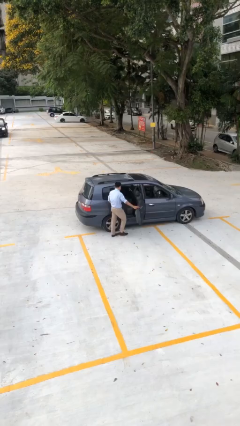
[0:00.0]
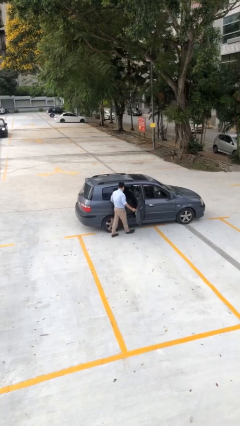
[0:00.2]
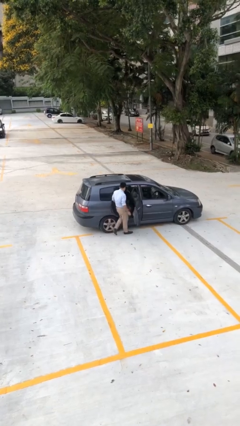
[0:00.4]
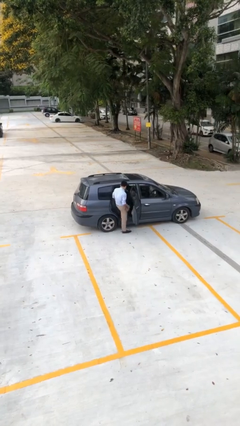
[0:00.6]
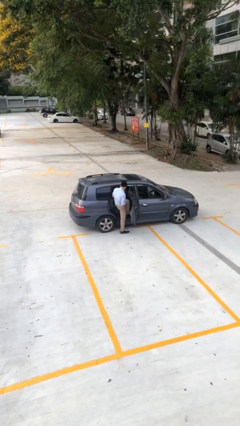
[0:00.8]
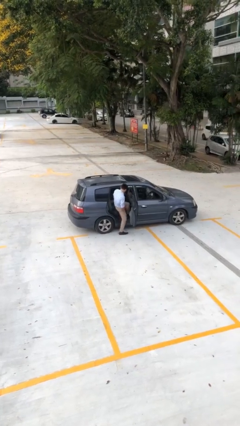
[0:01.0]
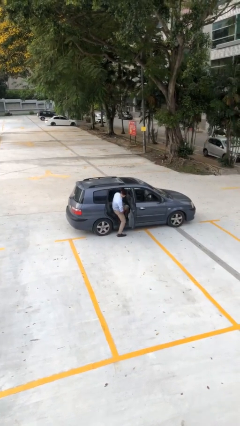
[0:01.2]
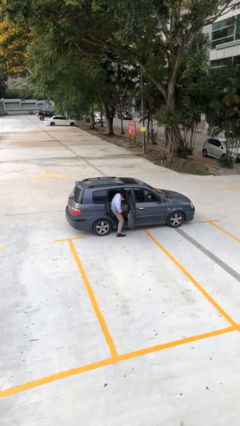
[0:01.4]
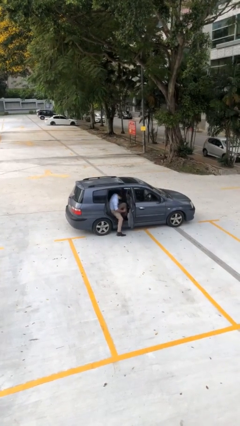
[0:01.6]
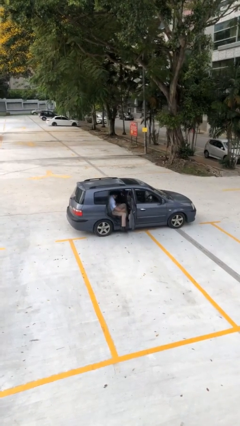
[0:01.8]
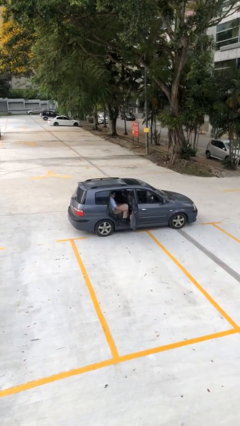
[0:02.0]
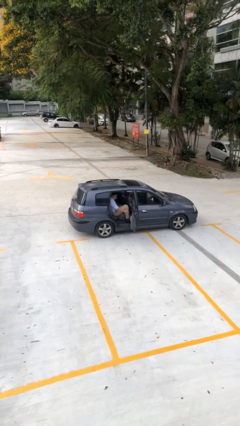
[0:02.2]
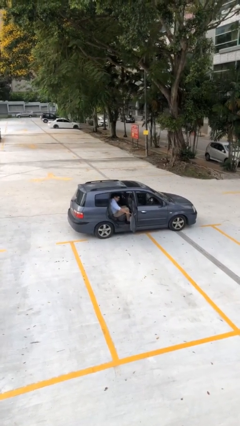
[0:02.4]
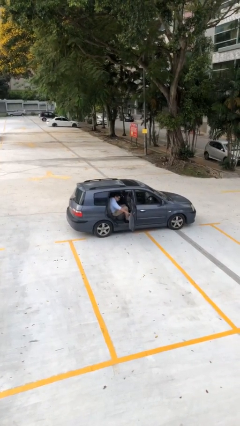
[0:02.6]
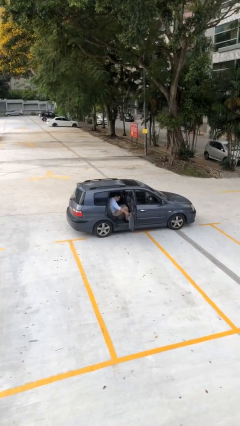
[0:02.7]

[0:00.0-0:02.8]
person enters car

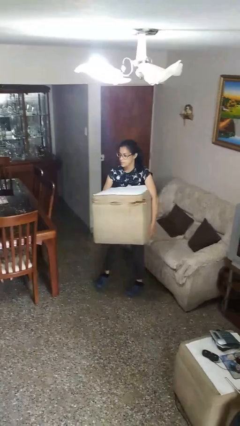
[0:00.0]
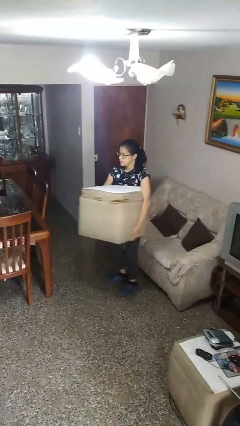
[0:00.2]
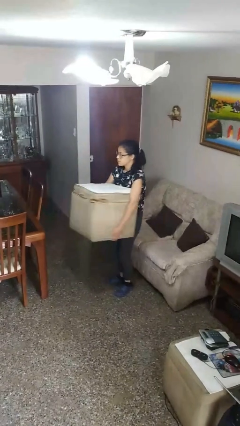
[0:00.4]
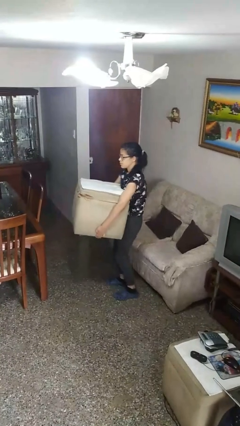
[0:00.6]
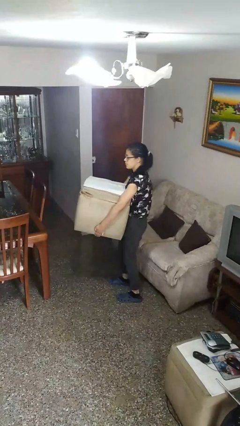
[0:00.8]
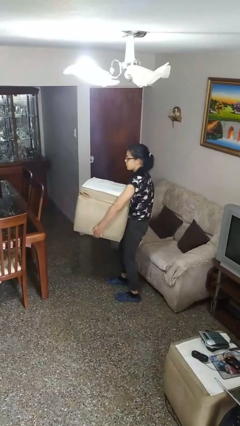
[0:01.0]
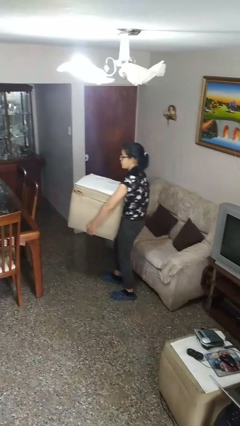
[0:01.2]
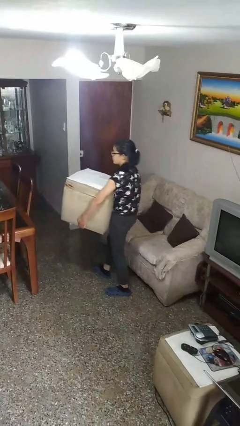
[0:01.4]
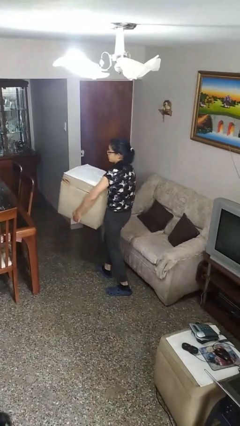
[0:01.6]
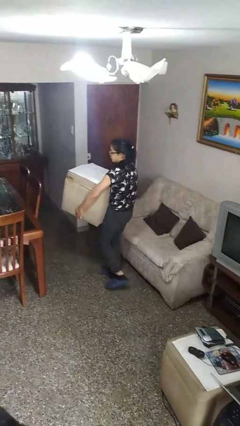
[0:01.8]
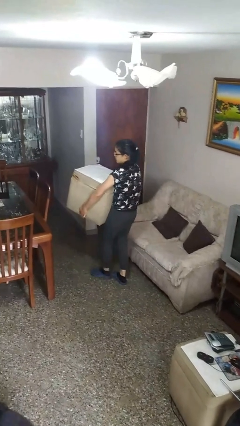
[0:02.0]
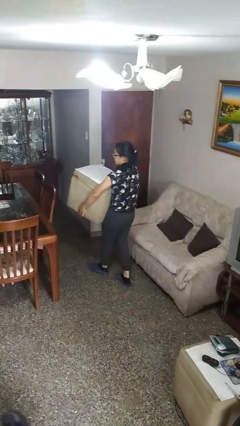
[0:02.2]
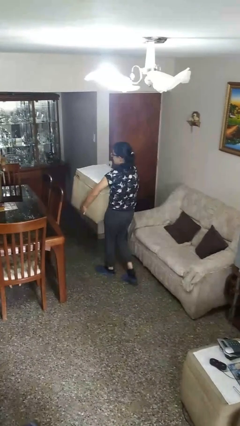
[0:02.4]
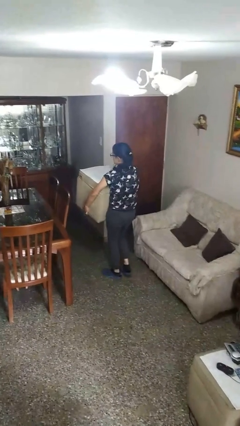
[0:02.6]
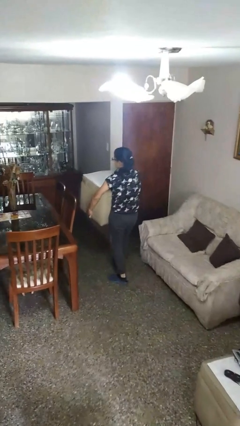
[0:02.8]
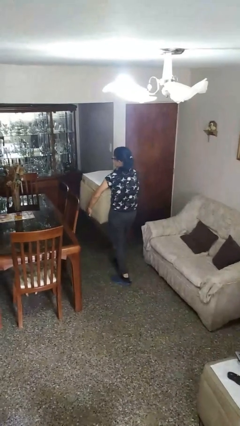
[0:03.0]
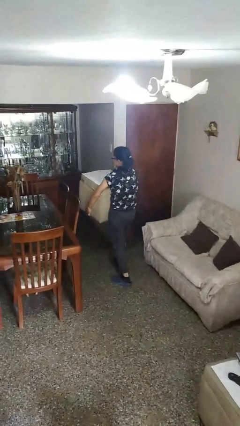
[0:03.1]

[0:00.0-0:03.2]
person carries furniture

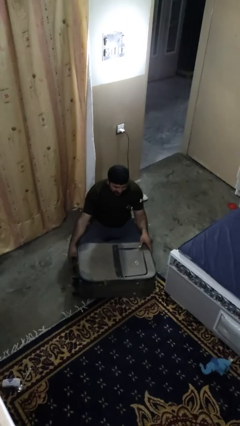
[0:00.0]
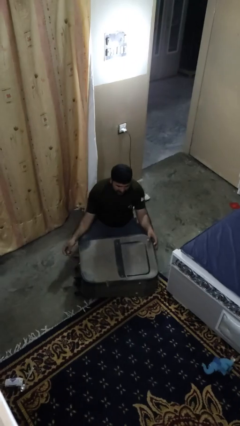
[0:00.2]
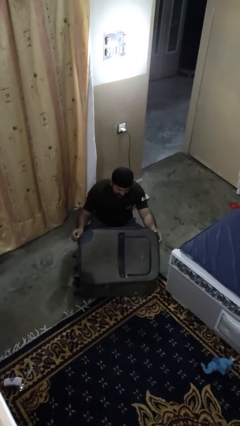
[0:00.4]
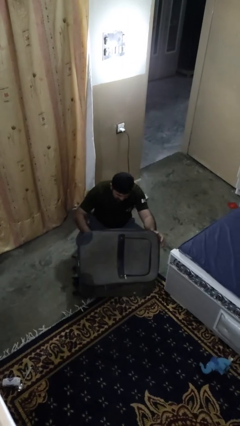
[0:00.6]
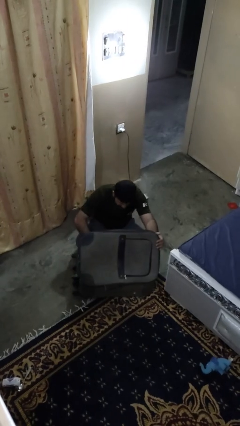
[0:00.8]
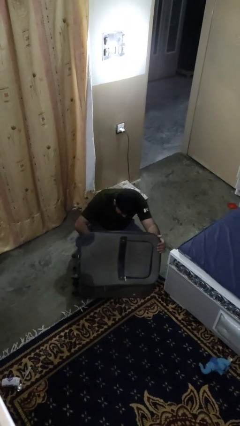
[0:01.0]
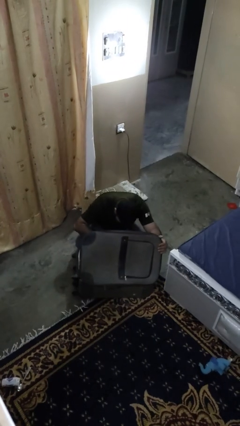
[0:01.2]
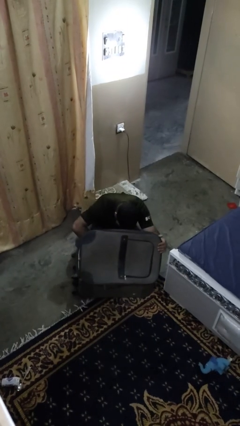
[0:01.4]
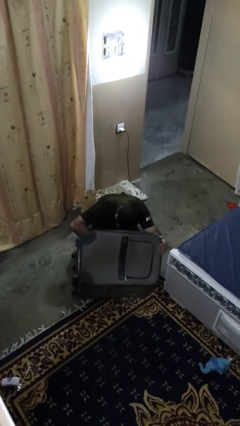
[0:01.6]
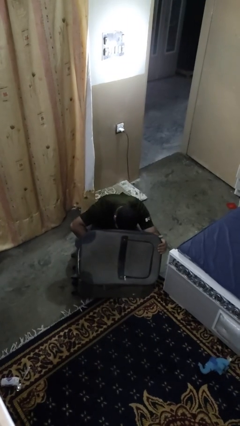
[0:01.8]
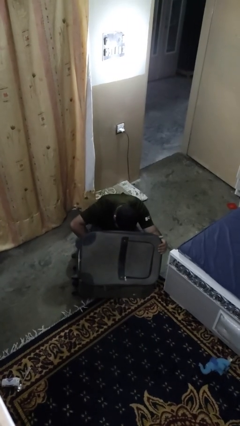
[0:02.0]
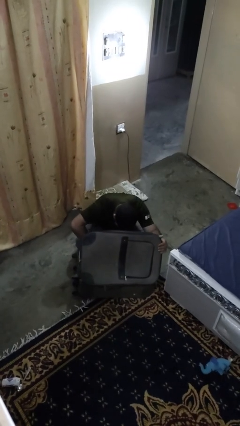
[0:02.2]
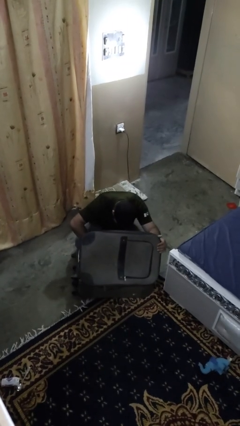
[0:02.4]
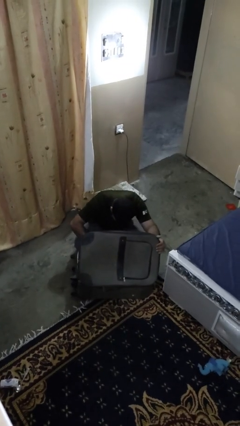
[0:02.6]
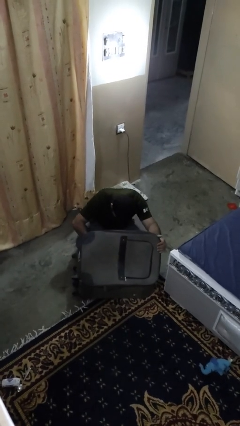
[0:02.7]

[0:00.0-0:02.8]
person searches in bag

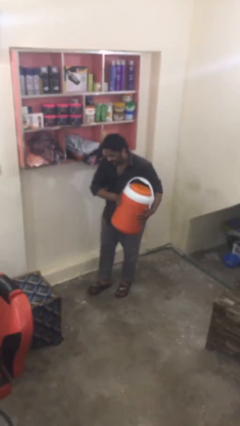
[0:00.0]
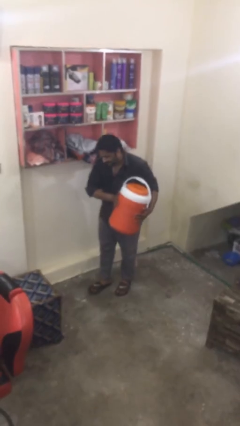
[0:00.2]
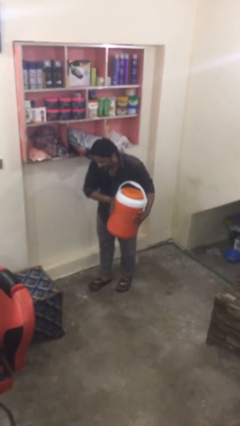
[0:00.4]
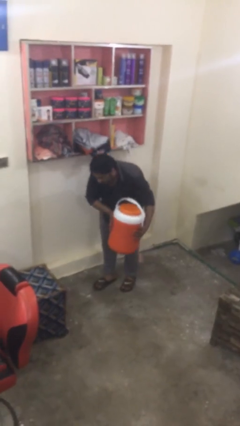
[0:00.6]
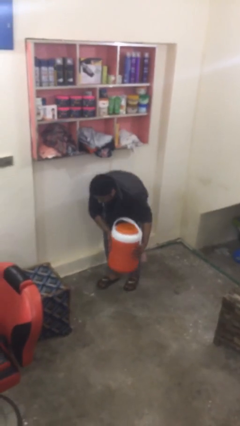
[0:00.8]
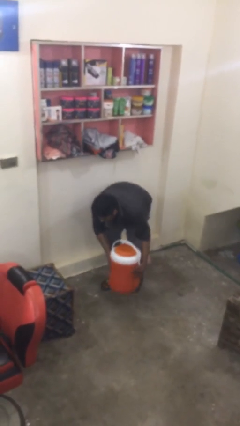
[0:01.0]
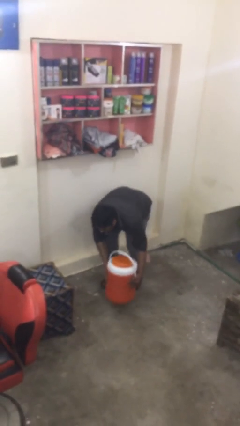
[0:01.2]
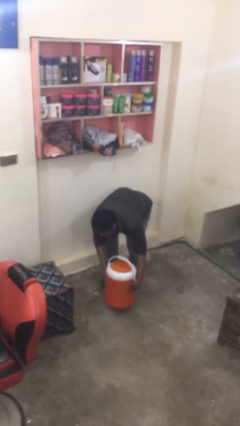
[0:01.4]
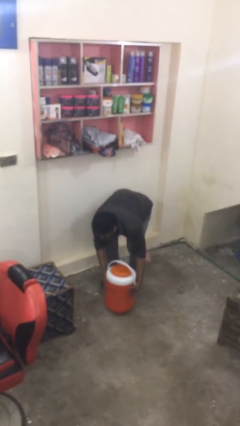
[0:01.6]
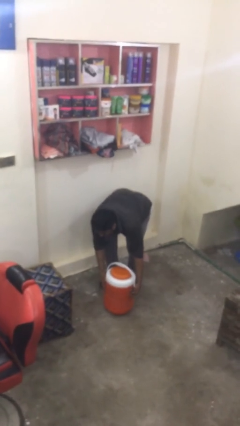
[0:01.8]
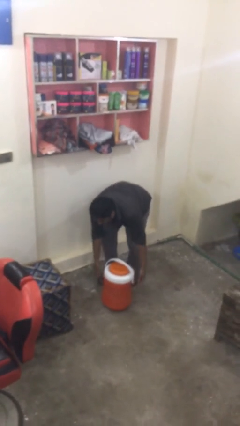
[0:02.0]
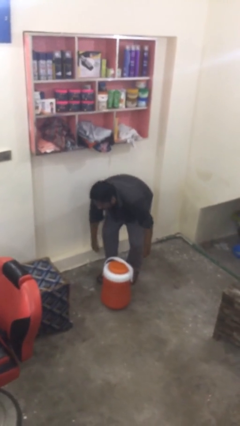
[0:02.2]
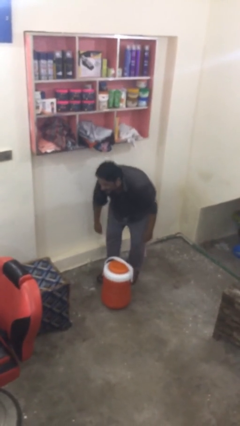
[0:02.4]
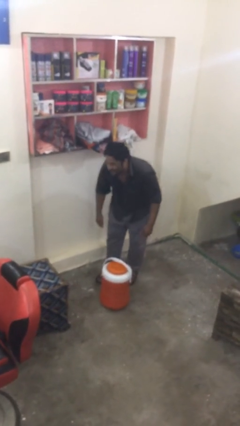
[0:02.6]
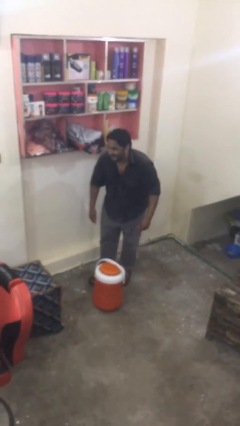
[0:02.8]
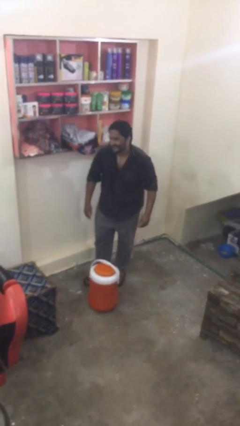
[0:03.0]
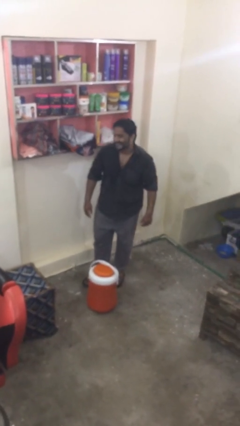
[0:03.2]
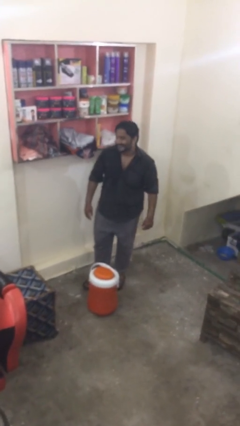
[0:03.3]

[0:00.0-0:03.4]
person puts down object on floor

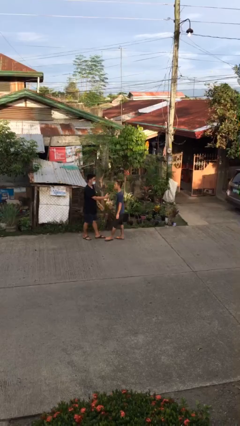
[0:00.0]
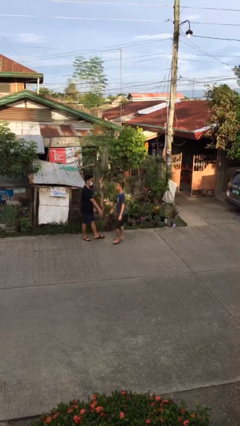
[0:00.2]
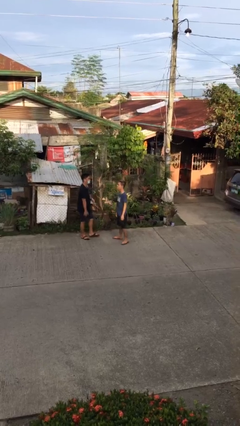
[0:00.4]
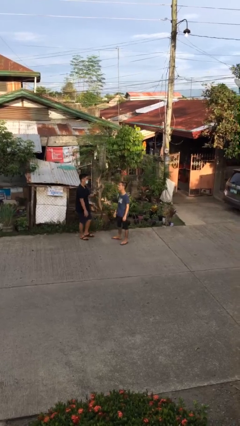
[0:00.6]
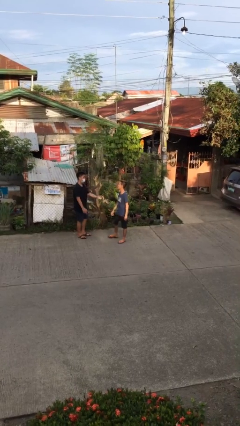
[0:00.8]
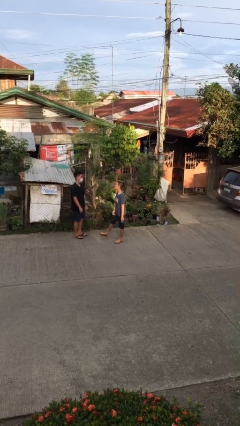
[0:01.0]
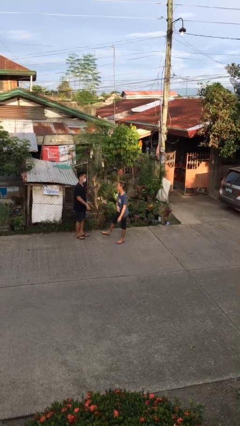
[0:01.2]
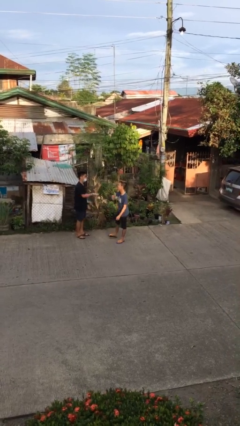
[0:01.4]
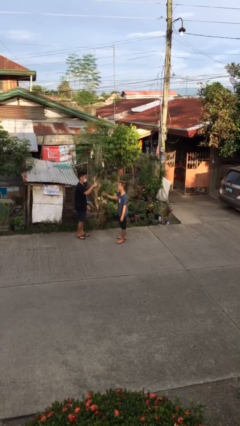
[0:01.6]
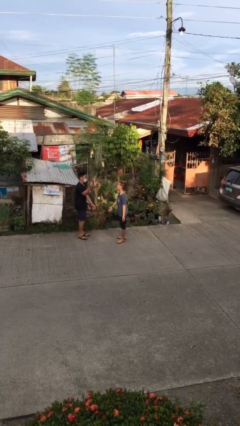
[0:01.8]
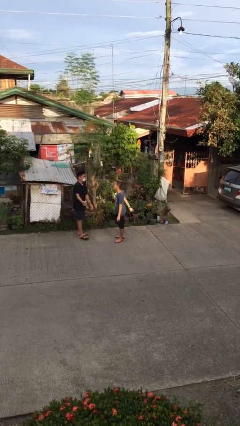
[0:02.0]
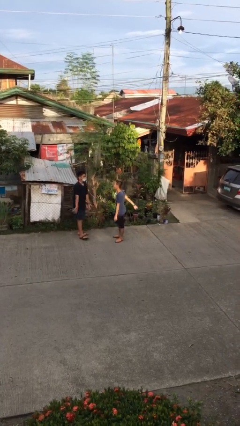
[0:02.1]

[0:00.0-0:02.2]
person talks to person

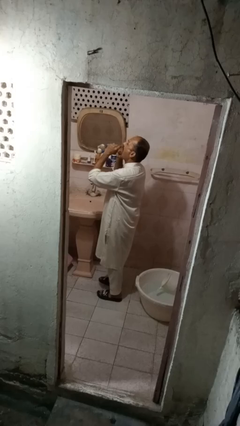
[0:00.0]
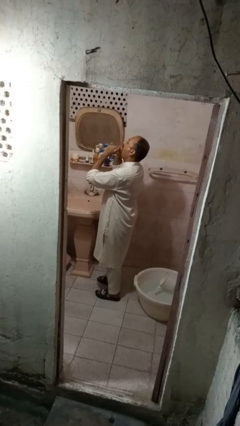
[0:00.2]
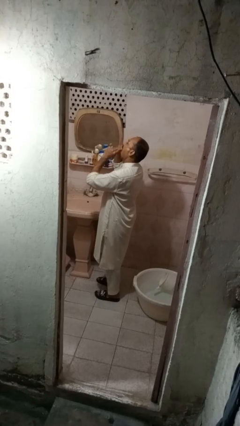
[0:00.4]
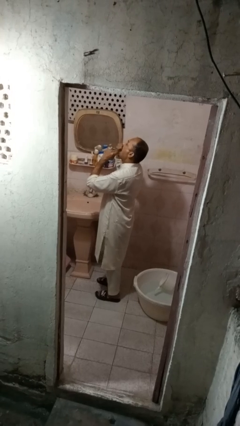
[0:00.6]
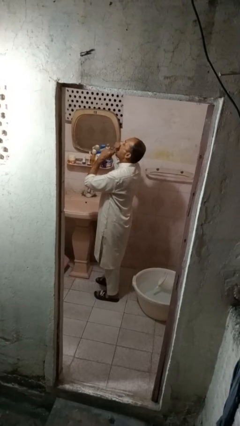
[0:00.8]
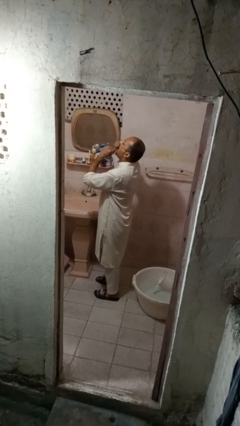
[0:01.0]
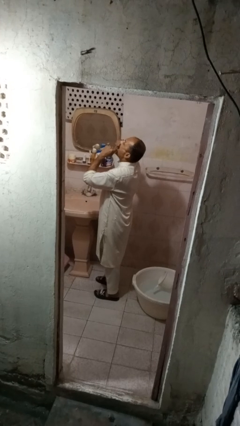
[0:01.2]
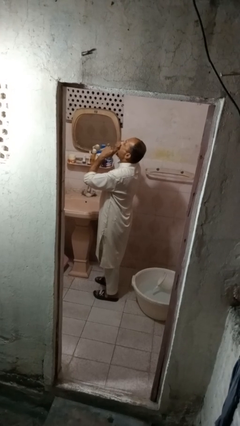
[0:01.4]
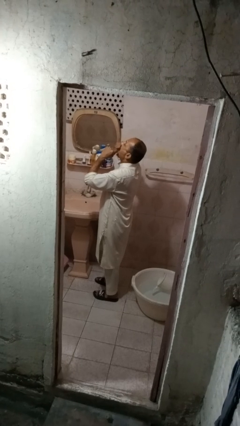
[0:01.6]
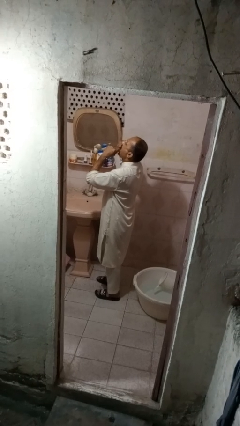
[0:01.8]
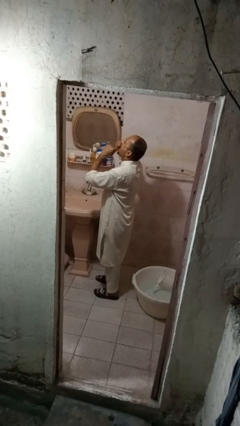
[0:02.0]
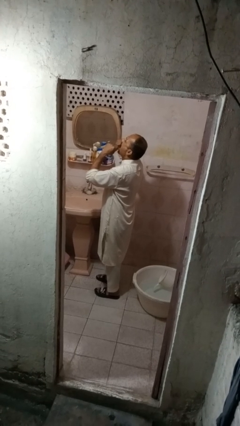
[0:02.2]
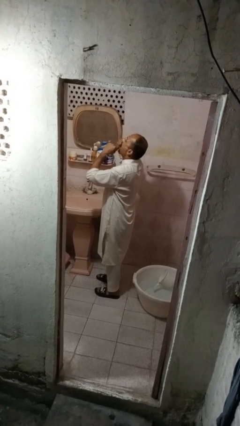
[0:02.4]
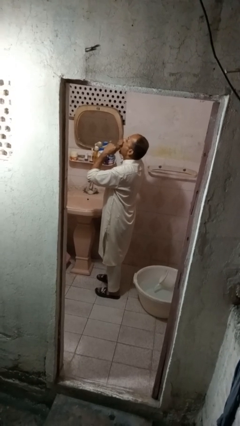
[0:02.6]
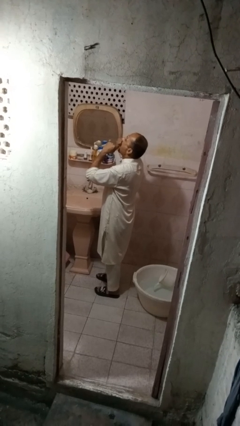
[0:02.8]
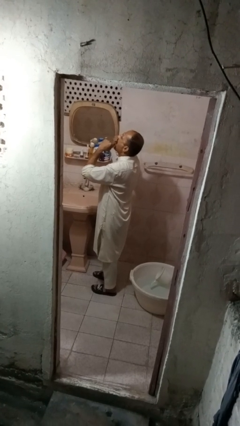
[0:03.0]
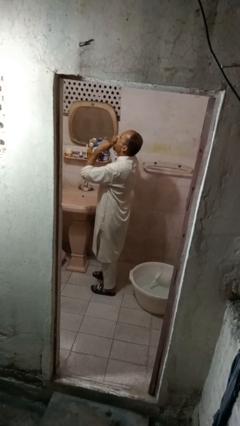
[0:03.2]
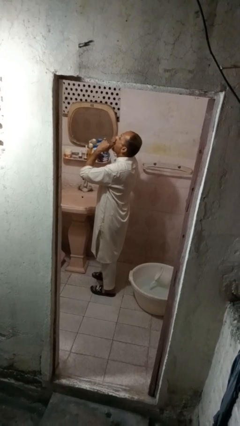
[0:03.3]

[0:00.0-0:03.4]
person flosses
